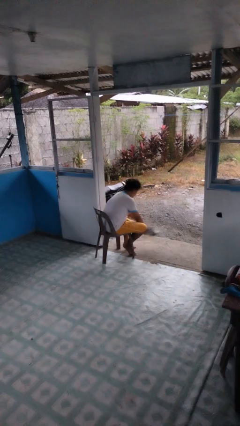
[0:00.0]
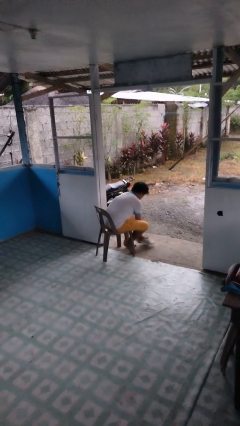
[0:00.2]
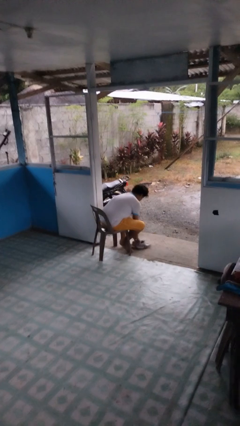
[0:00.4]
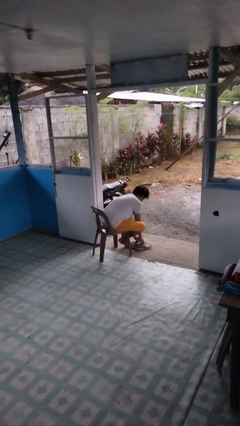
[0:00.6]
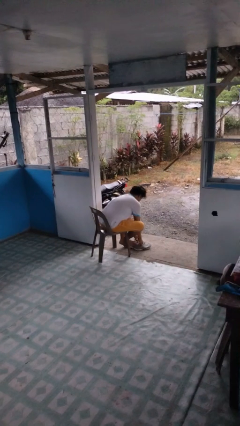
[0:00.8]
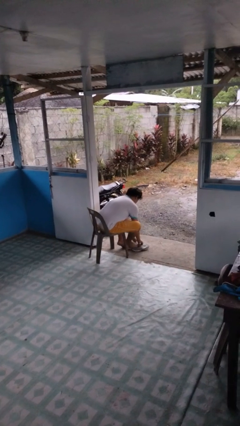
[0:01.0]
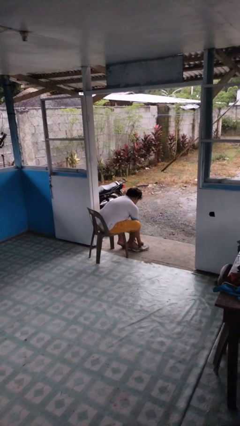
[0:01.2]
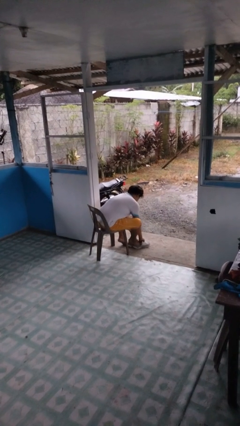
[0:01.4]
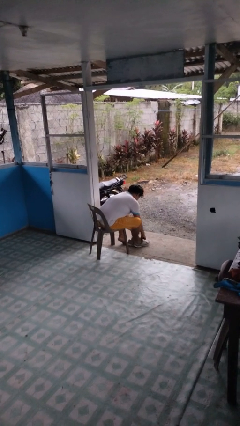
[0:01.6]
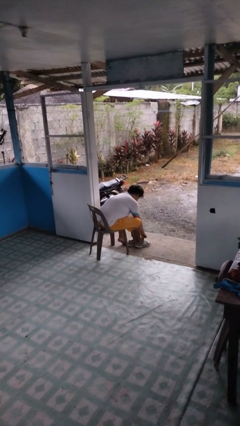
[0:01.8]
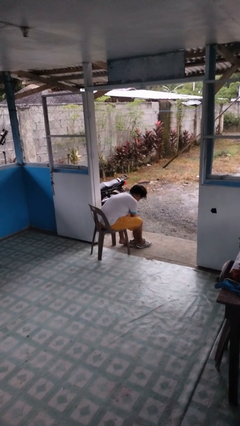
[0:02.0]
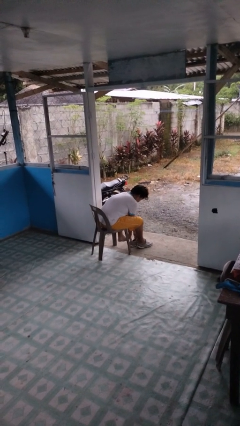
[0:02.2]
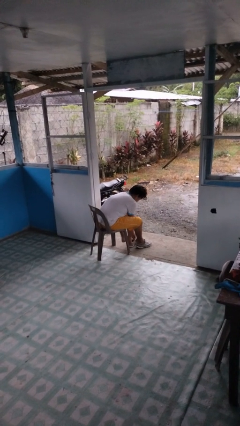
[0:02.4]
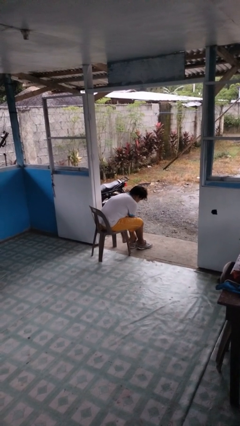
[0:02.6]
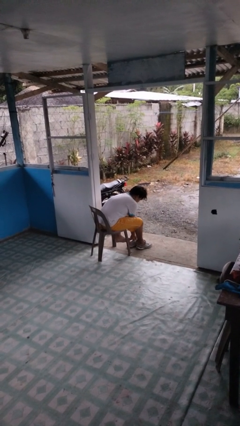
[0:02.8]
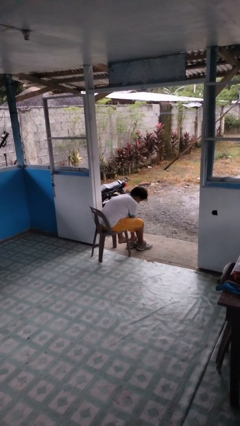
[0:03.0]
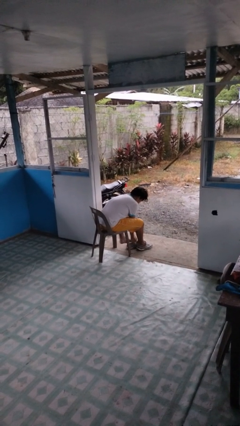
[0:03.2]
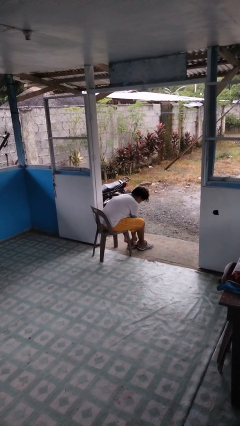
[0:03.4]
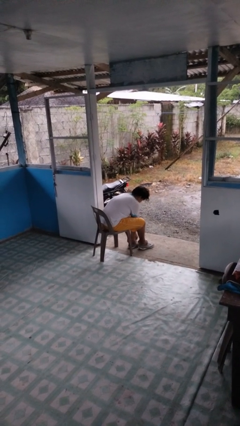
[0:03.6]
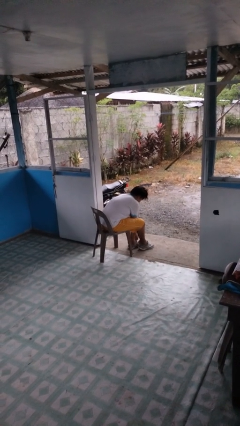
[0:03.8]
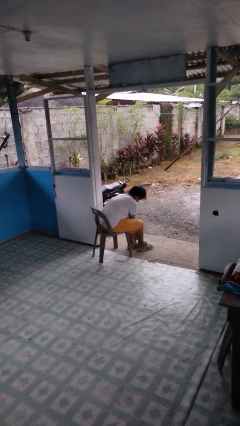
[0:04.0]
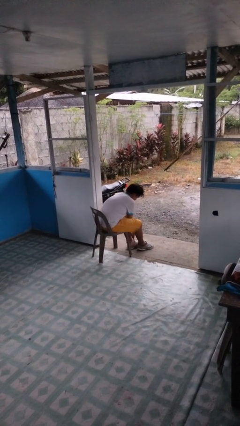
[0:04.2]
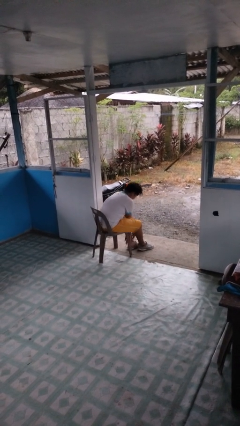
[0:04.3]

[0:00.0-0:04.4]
person puts on shoes

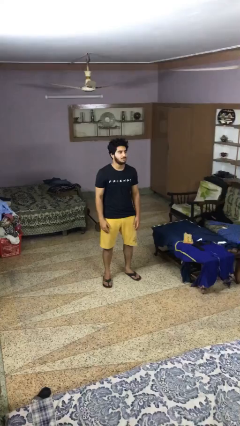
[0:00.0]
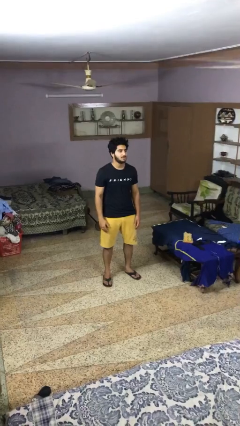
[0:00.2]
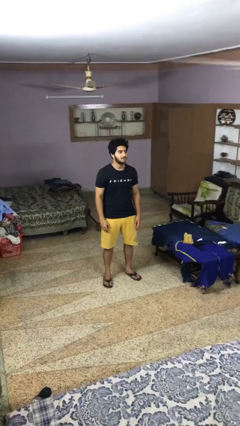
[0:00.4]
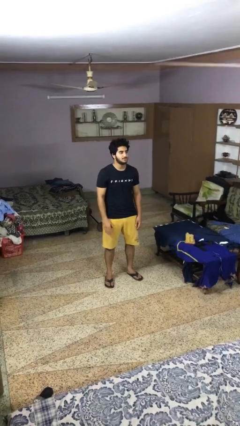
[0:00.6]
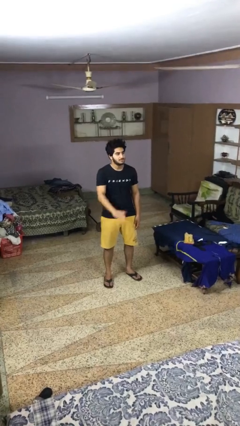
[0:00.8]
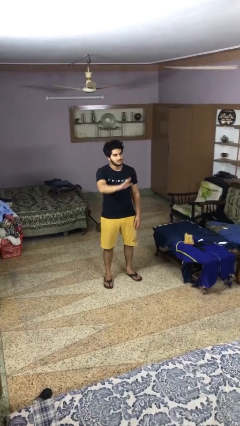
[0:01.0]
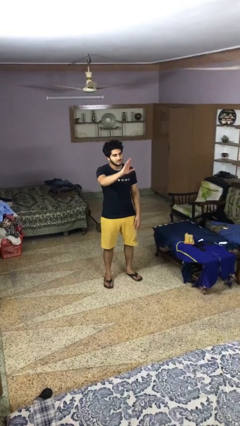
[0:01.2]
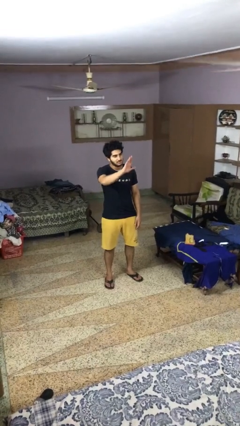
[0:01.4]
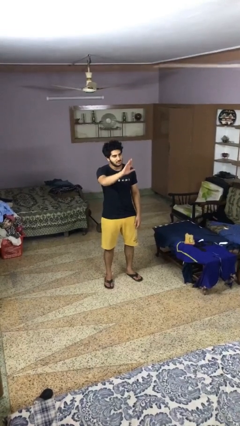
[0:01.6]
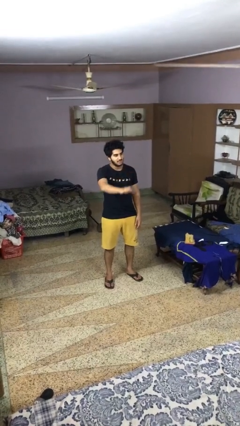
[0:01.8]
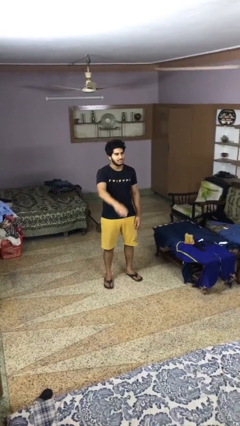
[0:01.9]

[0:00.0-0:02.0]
person gestures stop

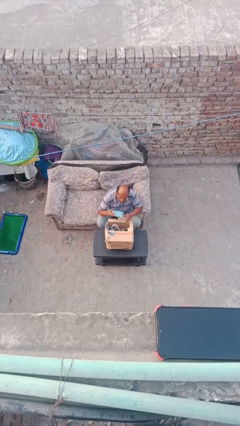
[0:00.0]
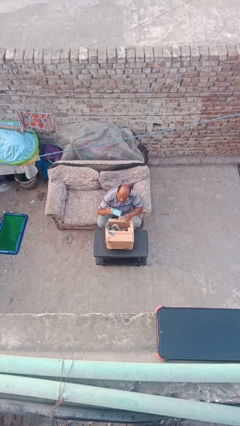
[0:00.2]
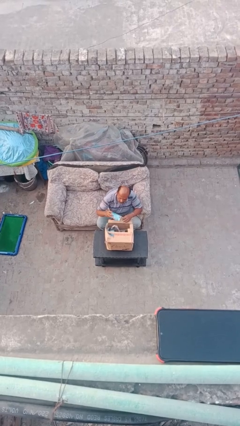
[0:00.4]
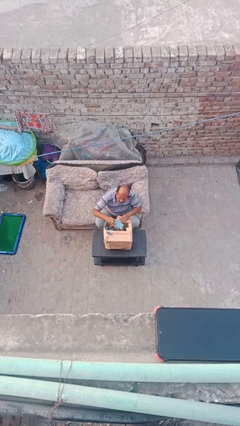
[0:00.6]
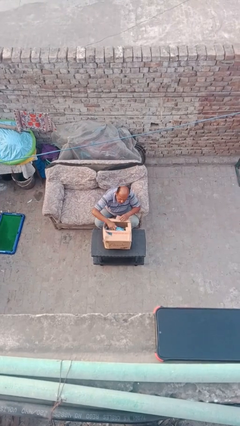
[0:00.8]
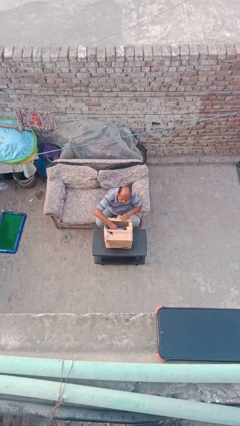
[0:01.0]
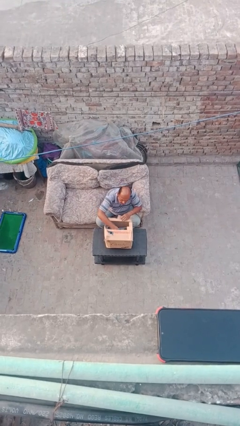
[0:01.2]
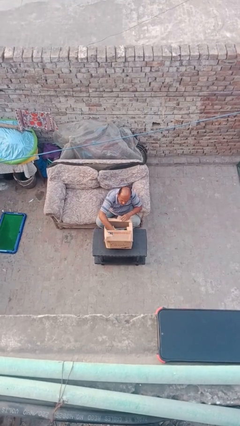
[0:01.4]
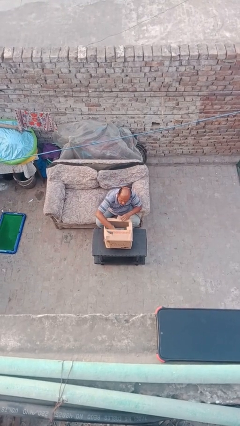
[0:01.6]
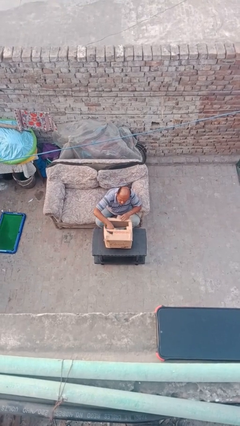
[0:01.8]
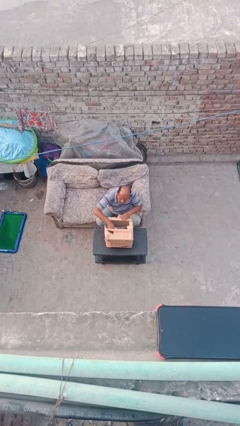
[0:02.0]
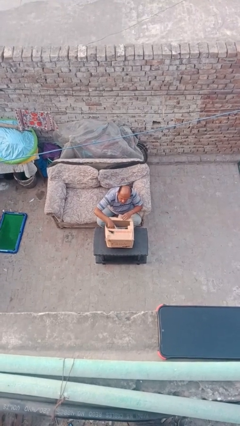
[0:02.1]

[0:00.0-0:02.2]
person puts object into box

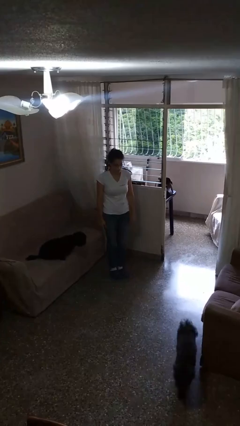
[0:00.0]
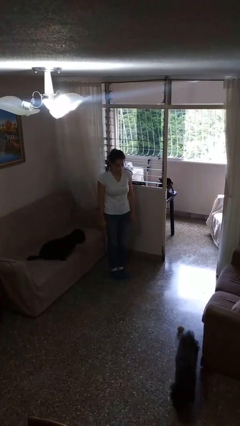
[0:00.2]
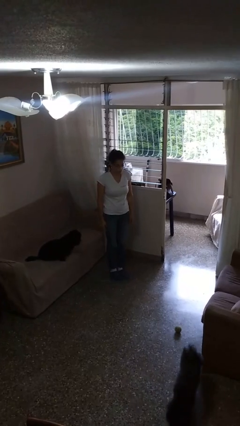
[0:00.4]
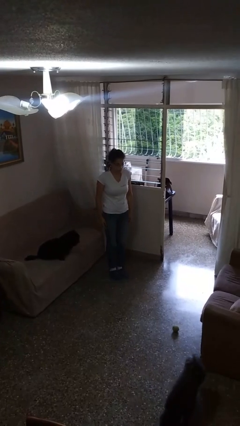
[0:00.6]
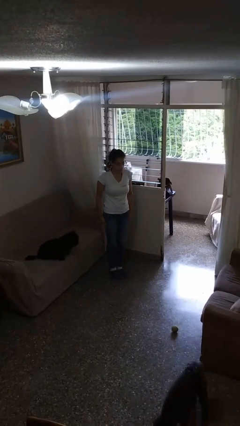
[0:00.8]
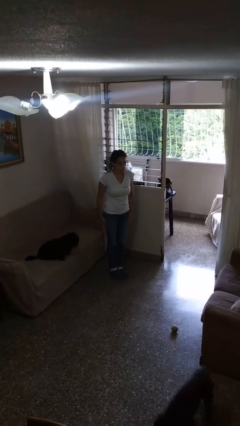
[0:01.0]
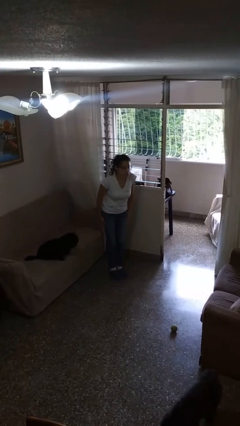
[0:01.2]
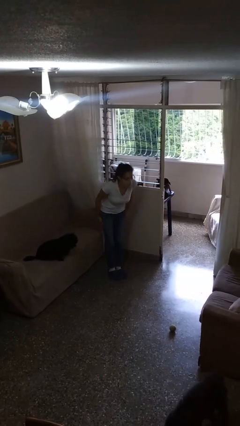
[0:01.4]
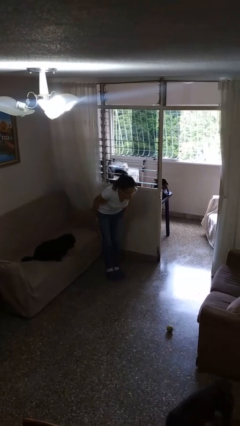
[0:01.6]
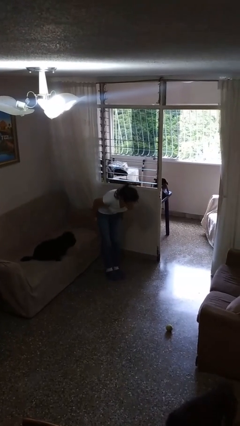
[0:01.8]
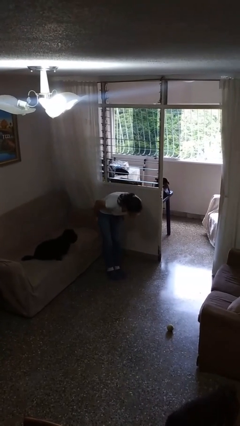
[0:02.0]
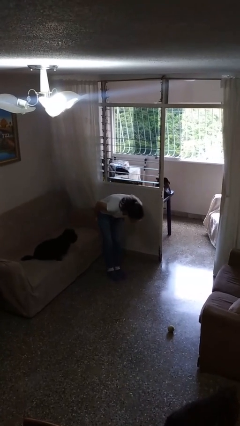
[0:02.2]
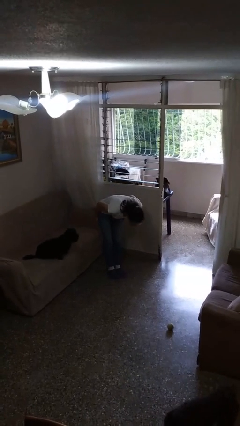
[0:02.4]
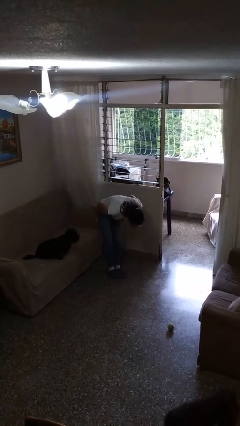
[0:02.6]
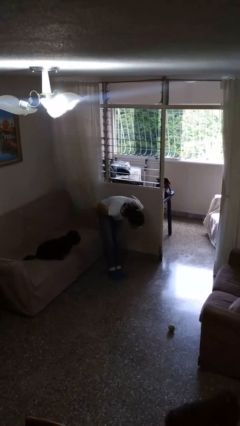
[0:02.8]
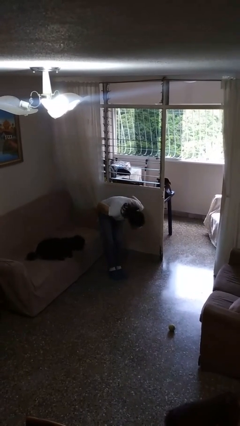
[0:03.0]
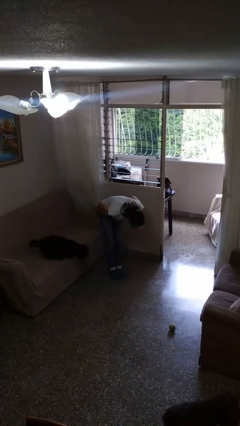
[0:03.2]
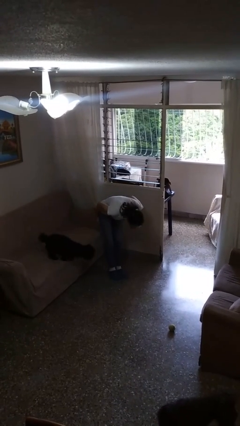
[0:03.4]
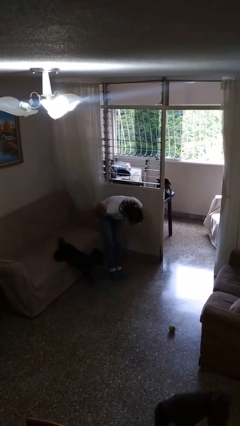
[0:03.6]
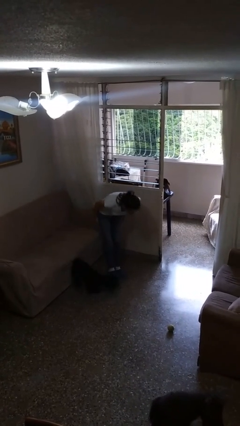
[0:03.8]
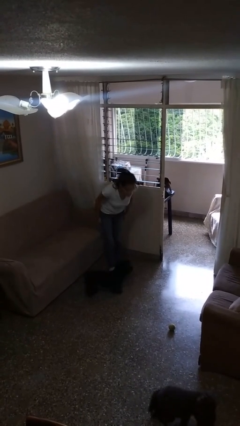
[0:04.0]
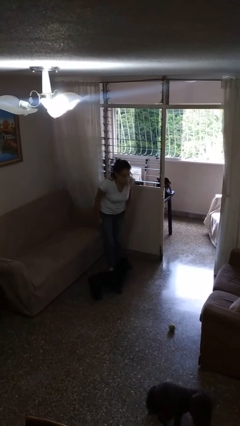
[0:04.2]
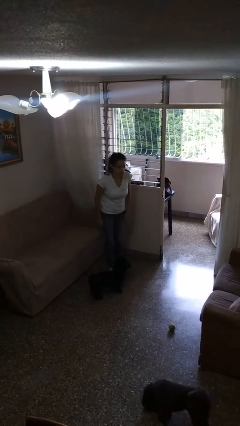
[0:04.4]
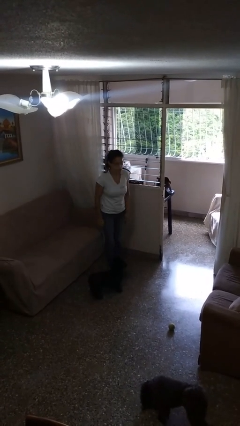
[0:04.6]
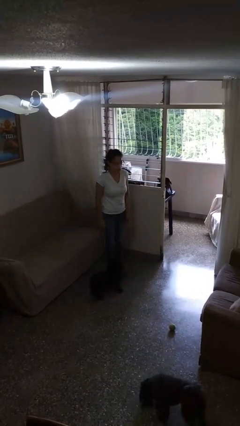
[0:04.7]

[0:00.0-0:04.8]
person bows

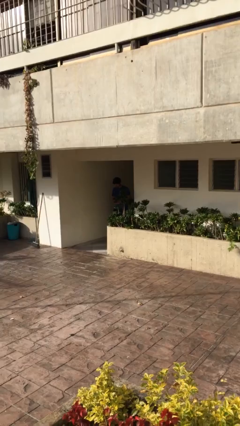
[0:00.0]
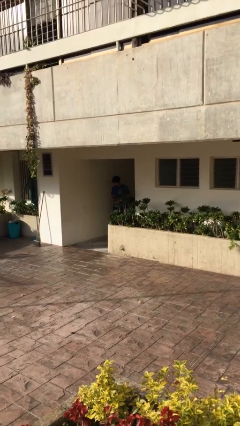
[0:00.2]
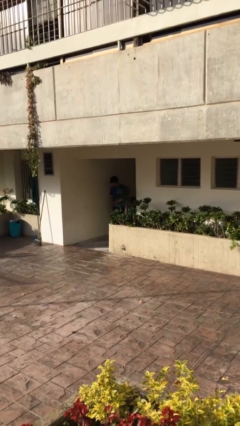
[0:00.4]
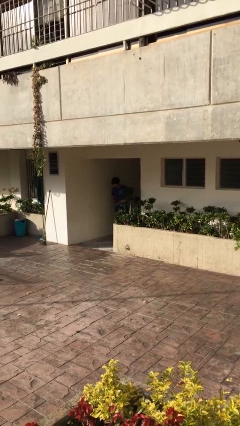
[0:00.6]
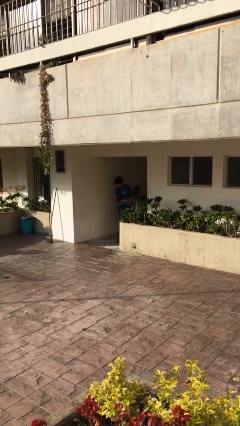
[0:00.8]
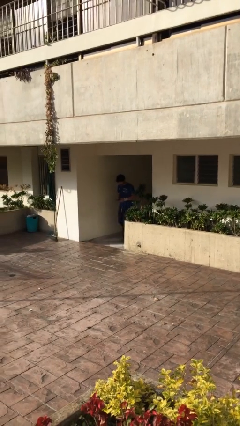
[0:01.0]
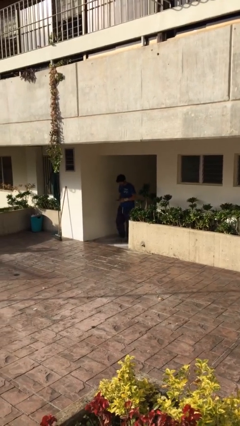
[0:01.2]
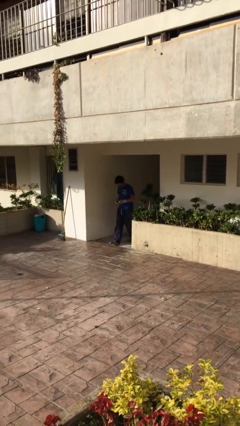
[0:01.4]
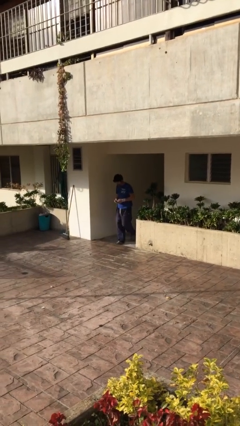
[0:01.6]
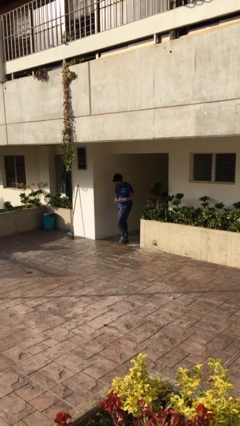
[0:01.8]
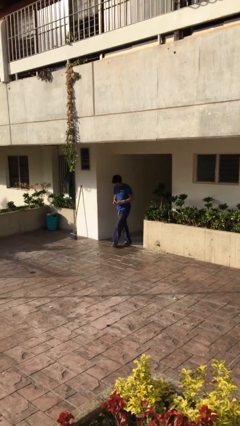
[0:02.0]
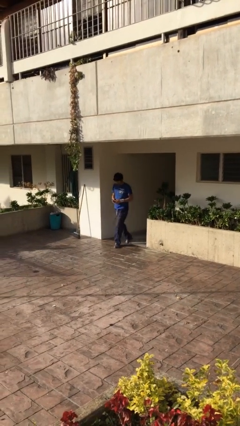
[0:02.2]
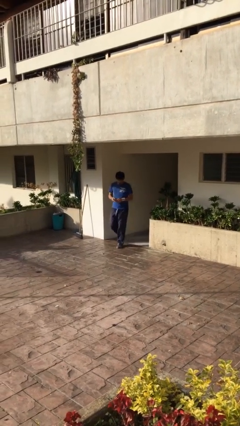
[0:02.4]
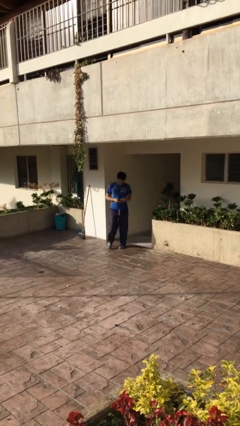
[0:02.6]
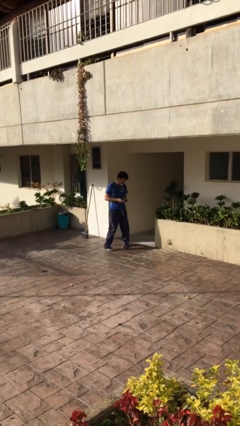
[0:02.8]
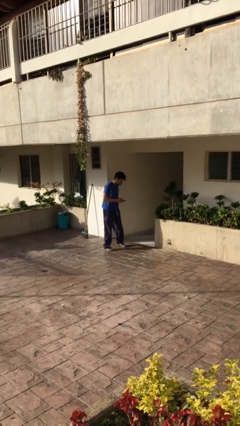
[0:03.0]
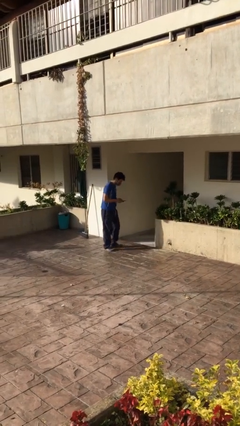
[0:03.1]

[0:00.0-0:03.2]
person enters scene through structure

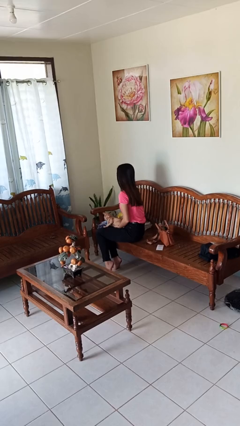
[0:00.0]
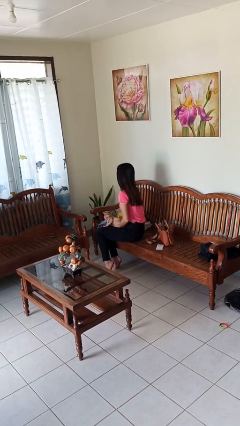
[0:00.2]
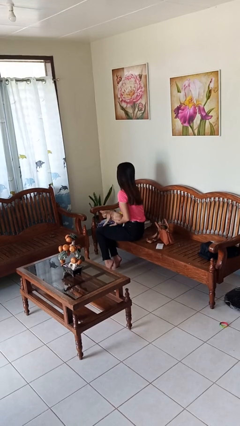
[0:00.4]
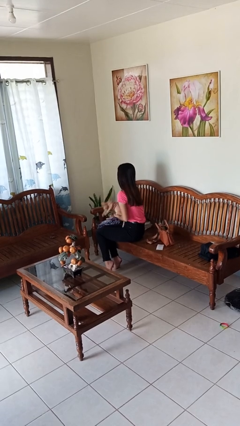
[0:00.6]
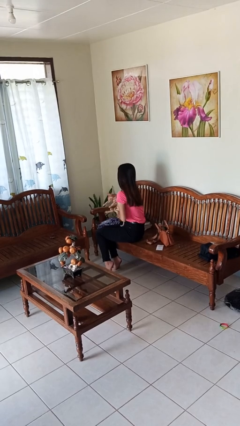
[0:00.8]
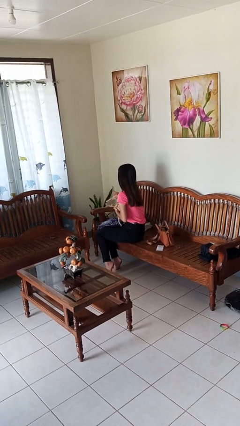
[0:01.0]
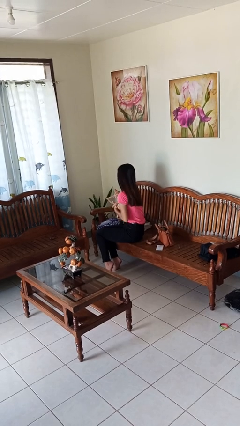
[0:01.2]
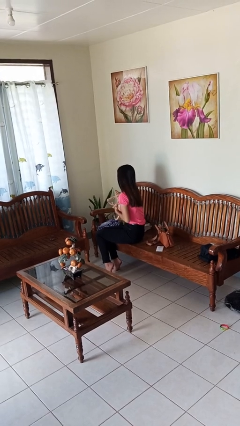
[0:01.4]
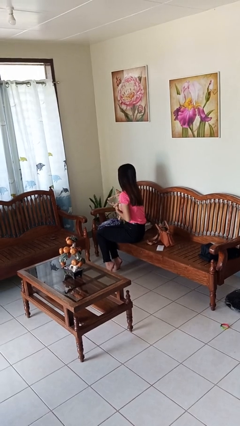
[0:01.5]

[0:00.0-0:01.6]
person hugs cat
